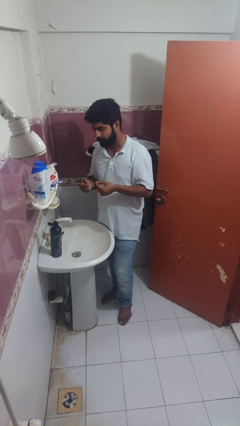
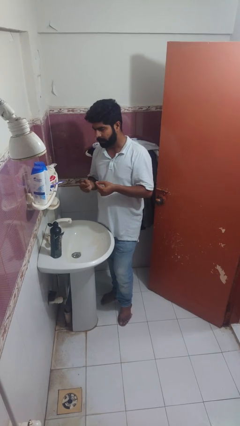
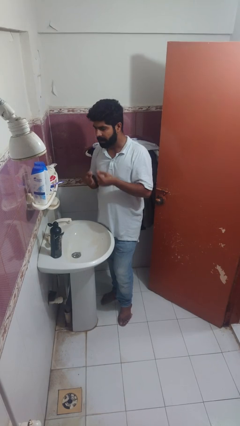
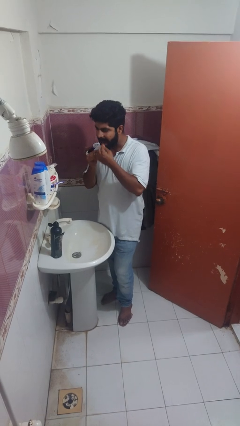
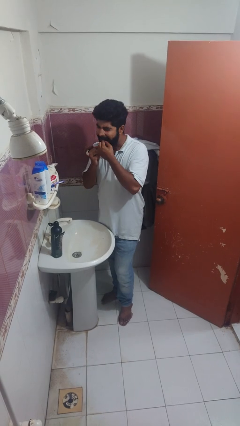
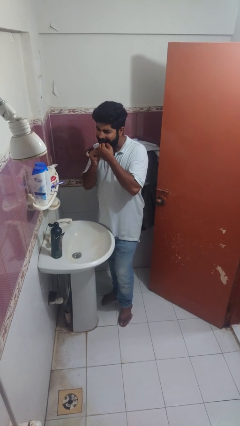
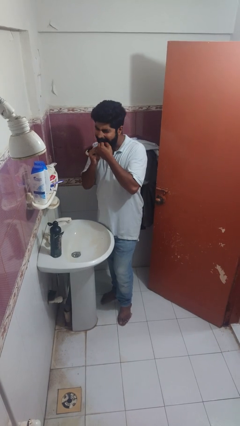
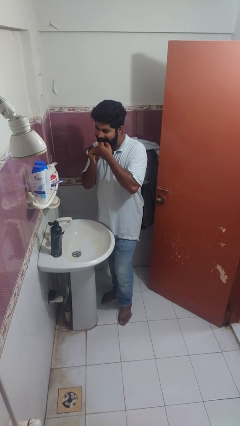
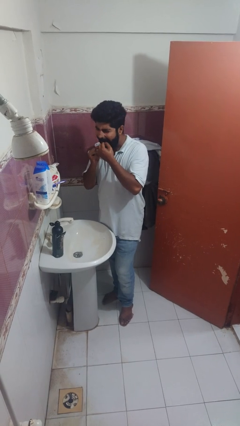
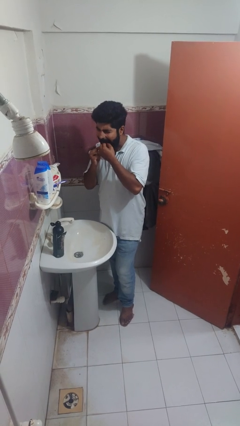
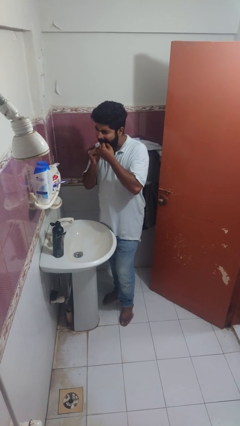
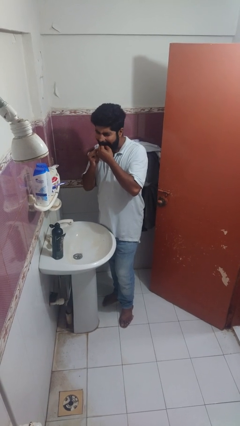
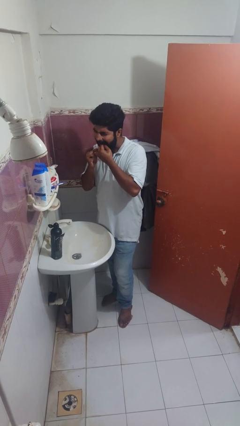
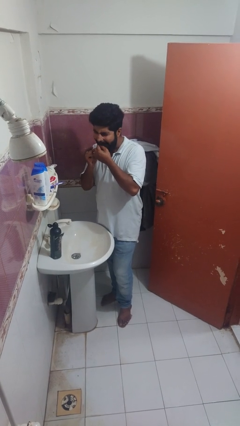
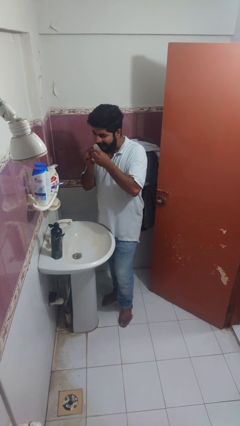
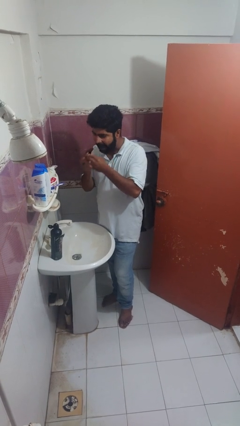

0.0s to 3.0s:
person flosses

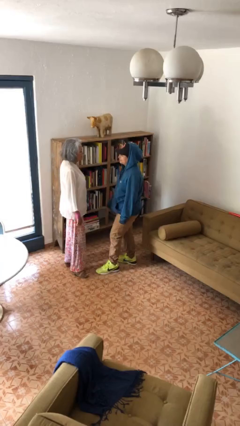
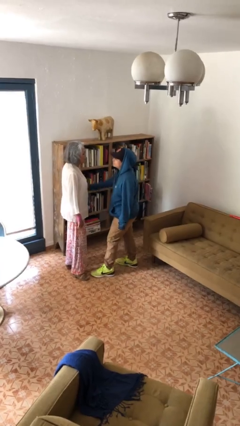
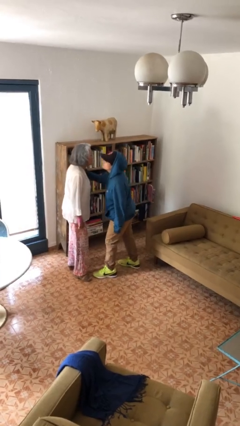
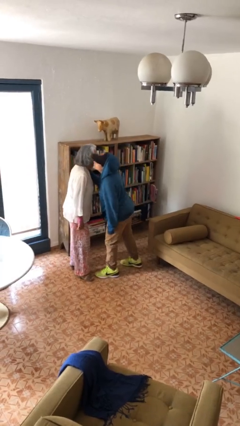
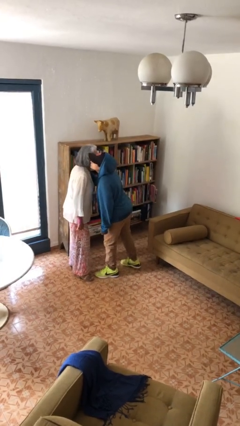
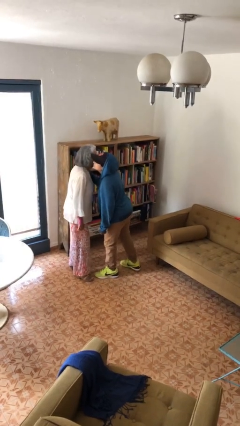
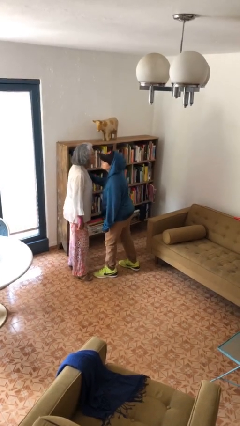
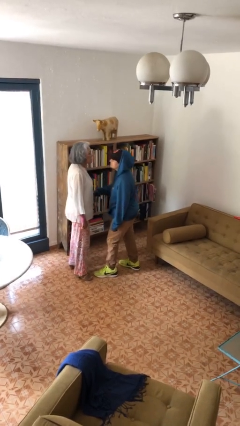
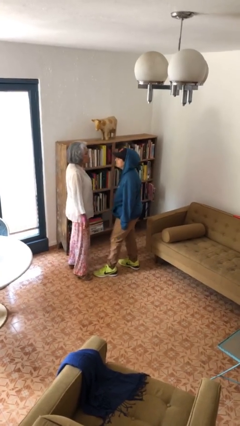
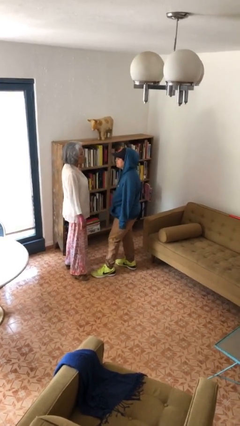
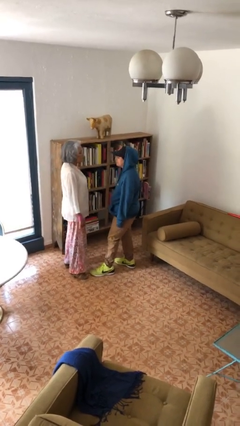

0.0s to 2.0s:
person kisses cheek of person

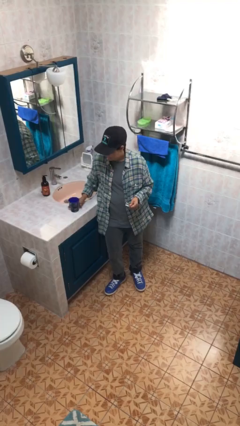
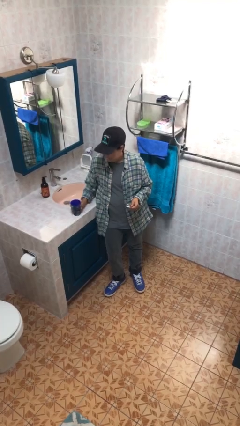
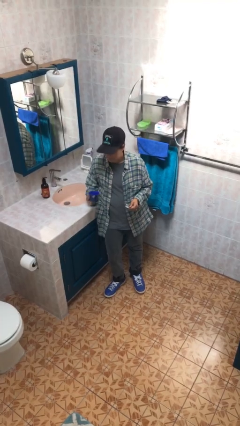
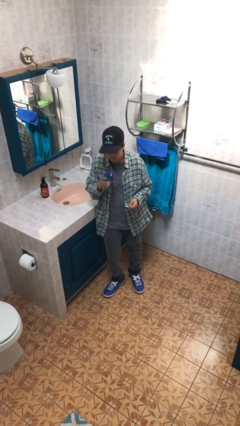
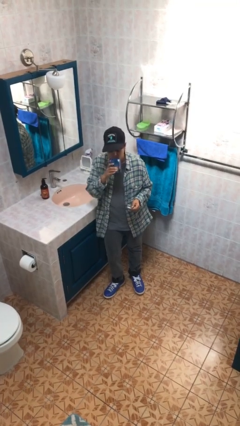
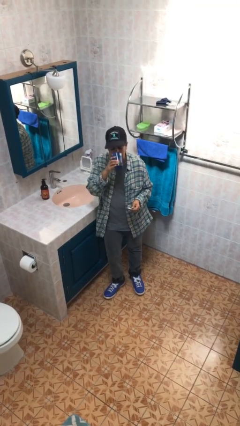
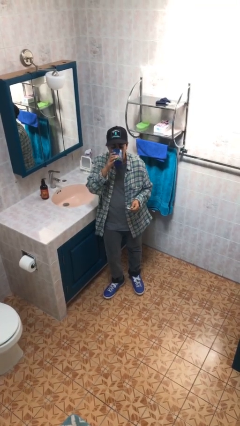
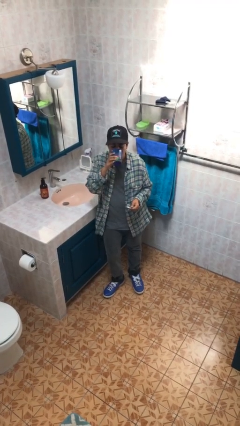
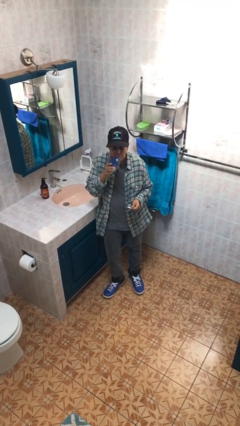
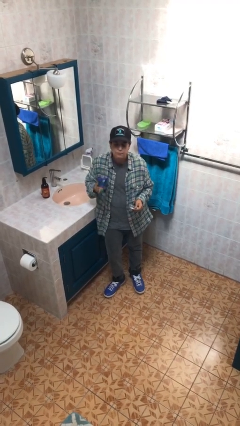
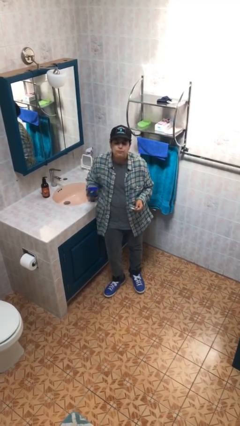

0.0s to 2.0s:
person drinks from cup

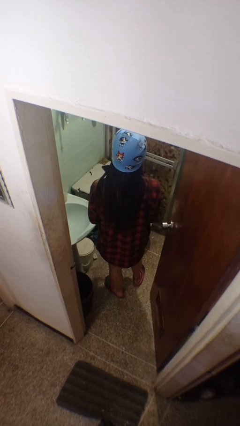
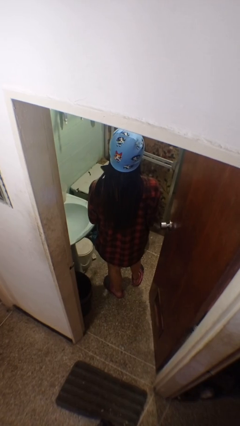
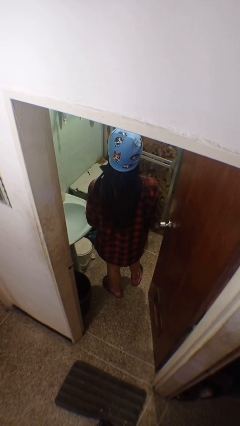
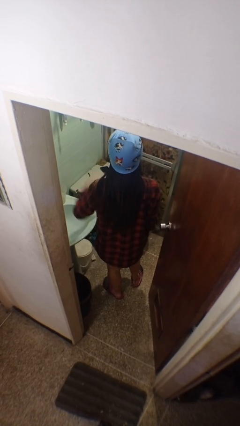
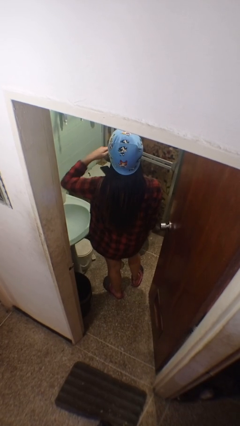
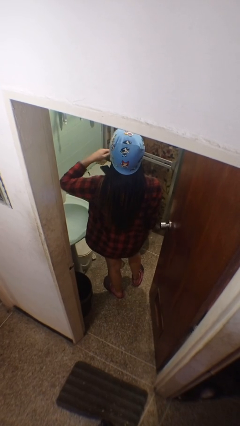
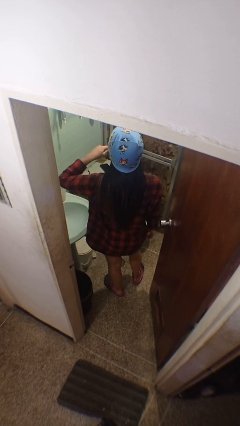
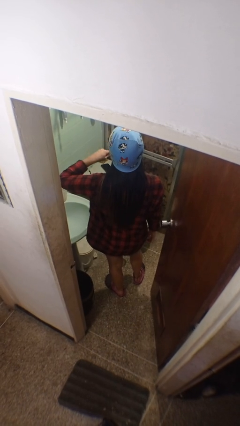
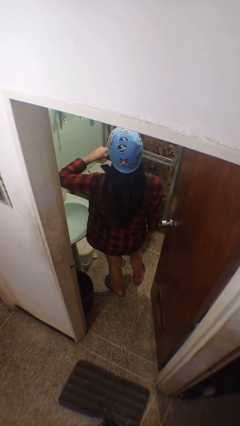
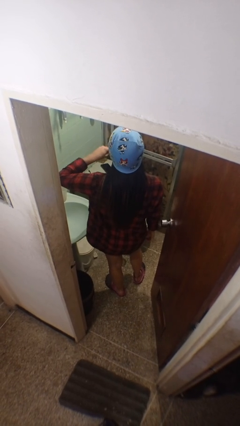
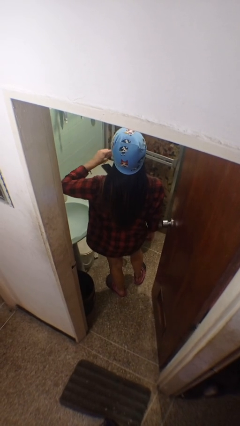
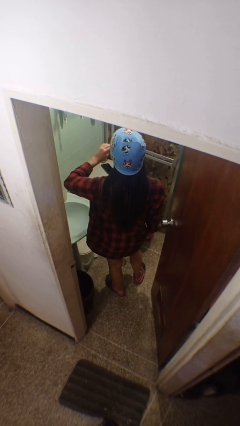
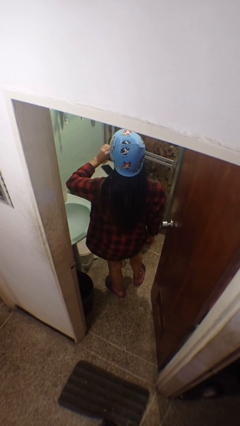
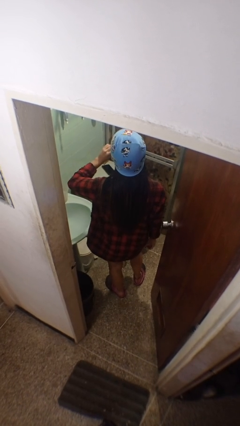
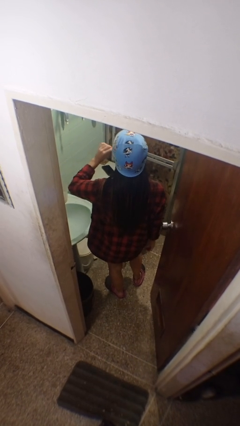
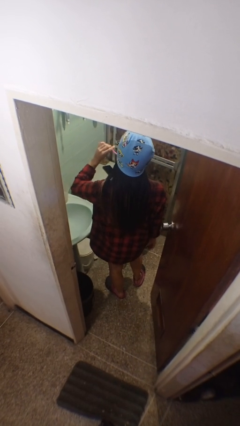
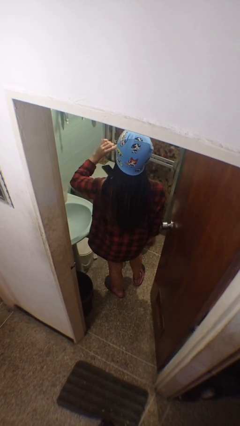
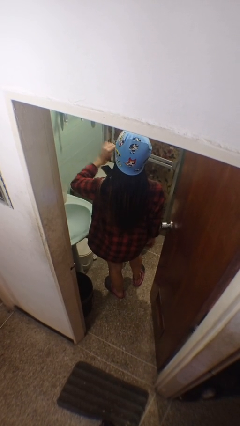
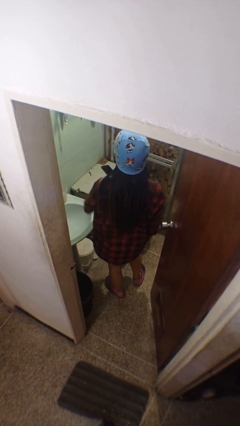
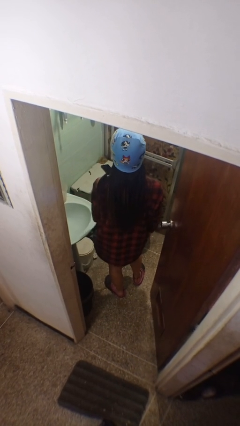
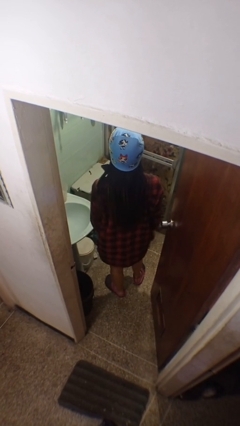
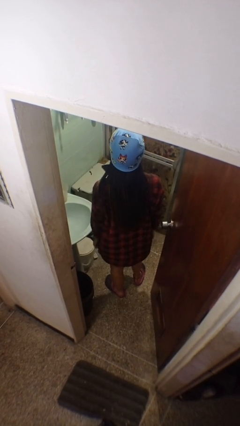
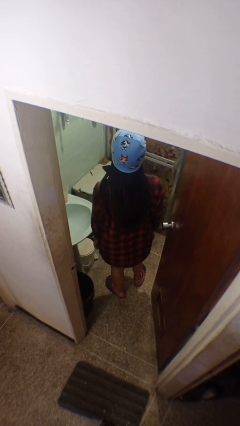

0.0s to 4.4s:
person brushes teeth

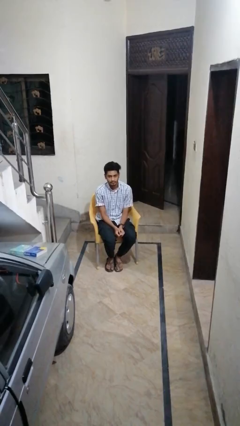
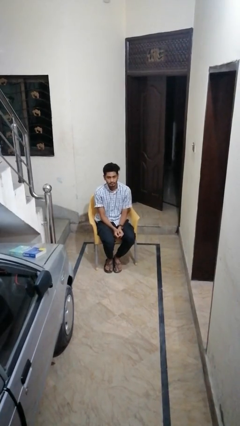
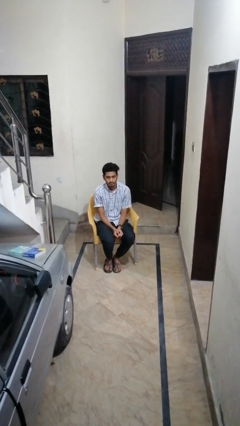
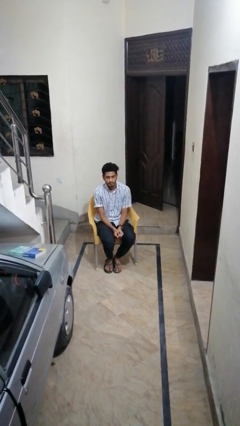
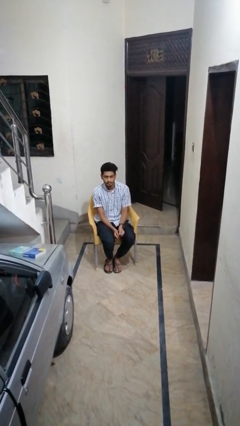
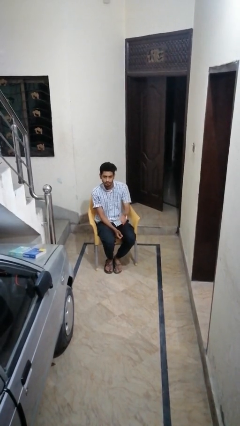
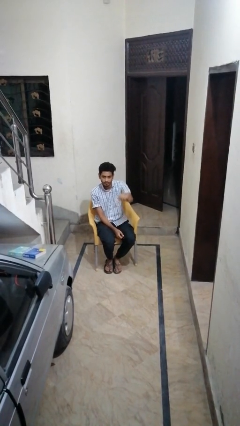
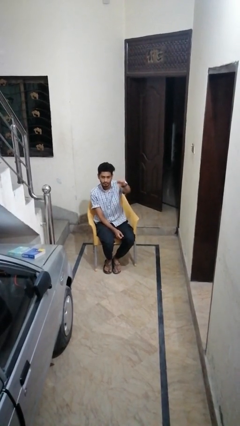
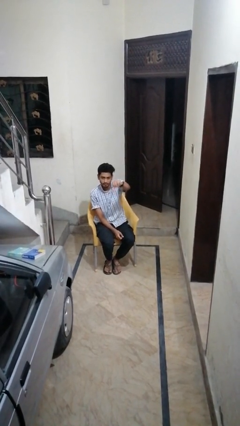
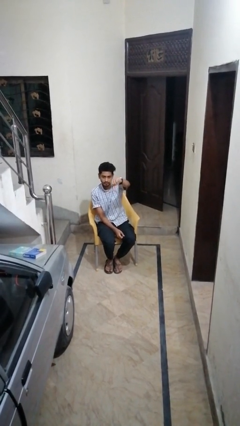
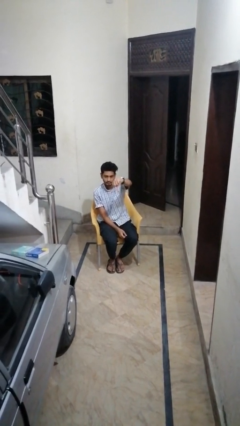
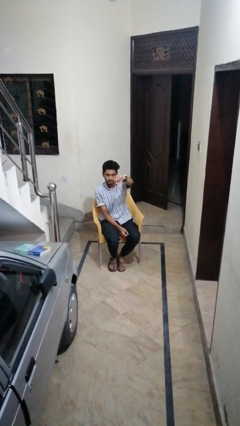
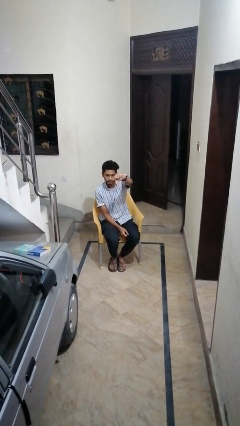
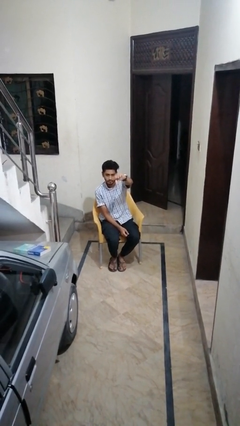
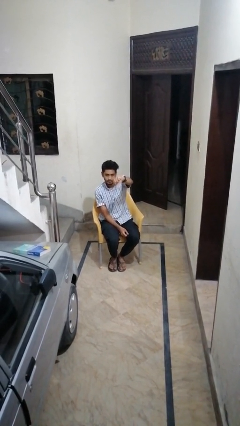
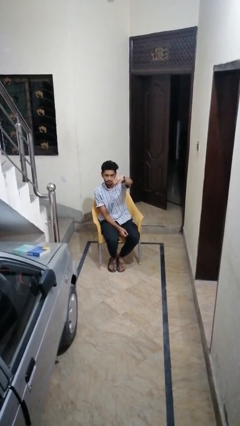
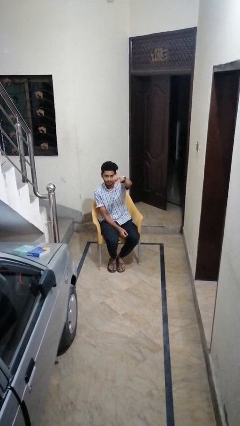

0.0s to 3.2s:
person gestures thumbs down

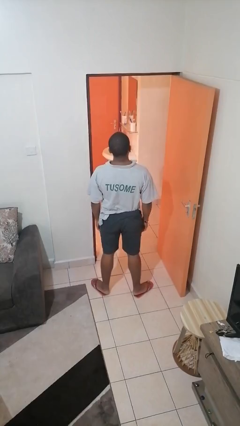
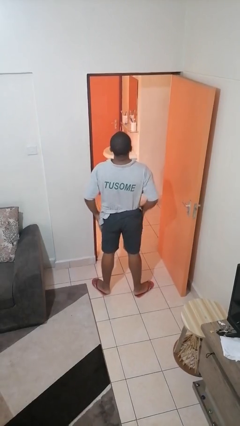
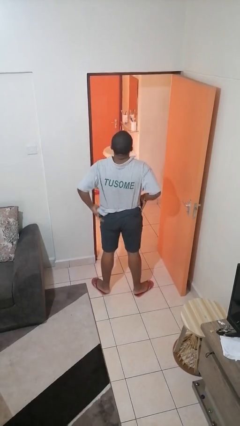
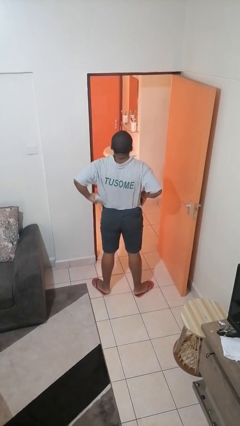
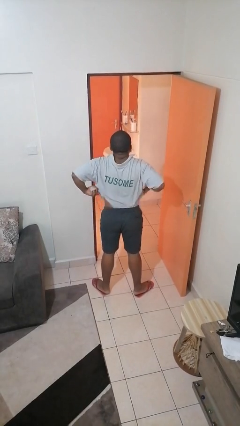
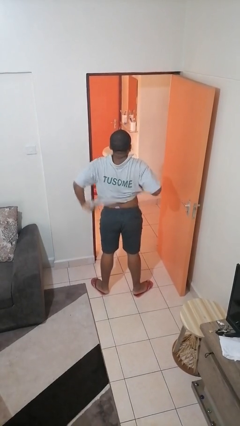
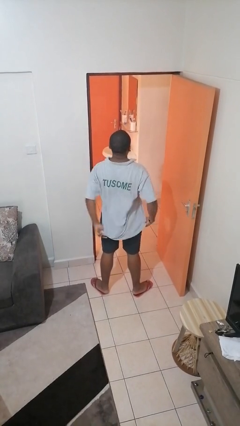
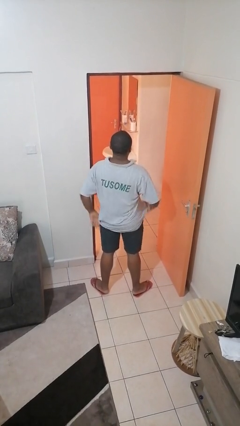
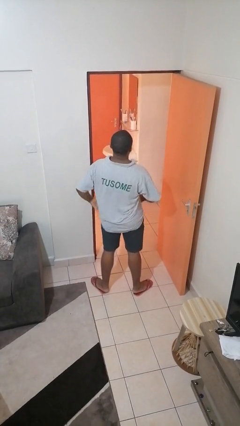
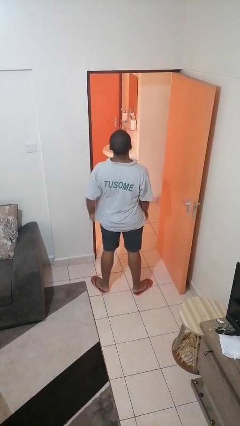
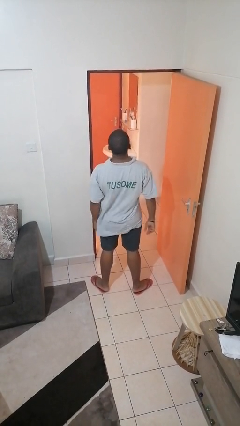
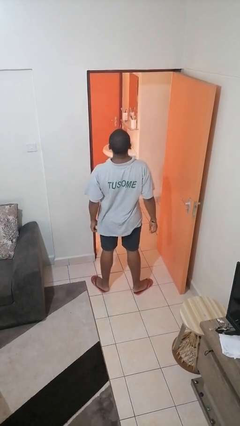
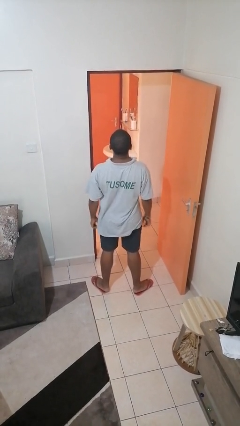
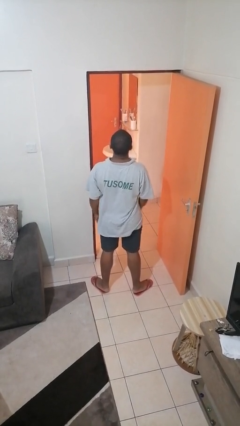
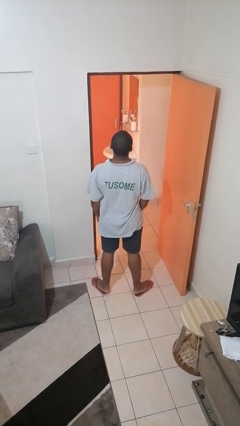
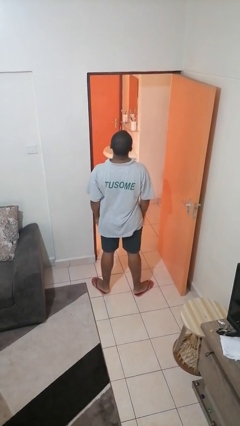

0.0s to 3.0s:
person untucks shirt
